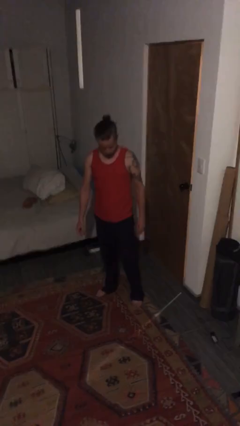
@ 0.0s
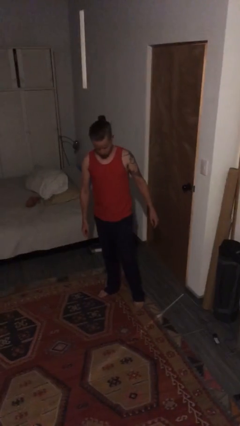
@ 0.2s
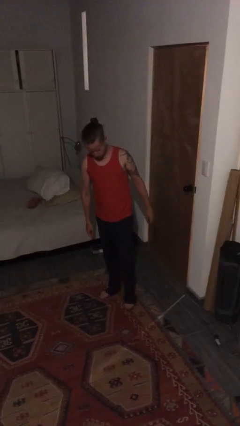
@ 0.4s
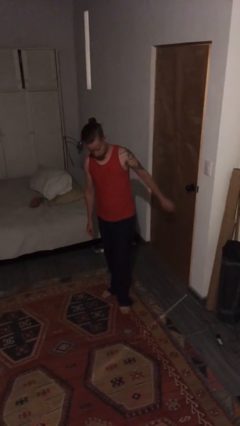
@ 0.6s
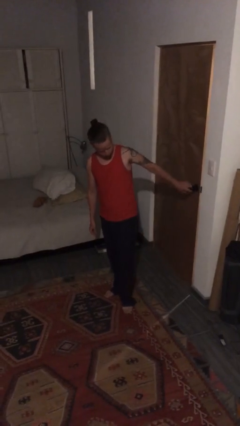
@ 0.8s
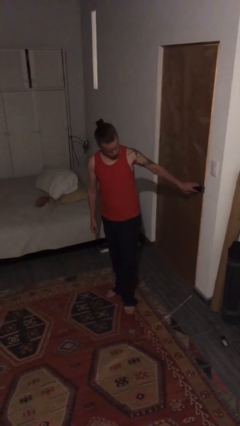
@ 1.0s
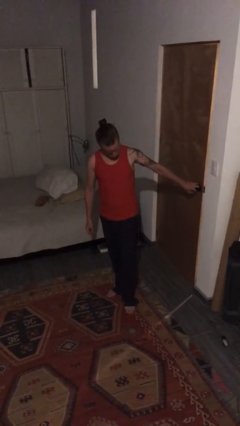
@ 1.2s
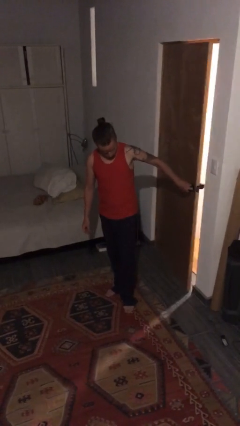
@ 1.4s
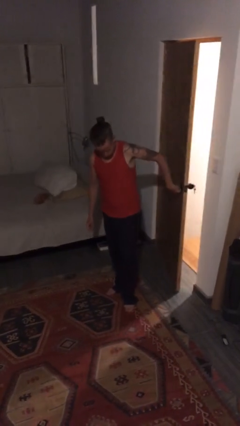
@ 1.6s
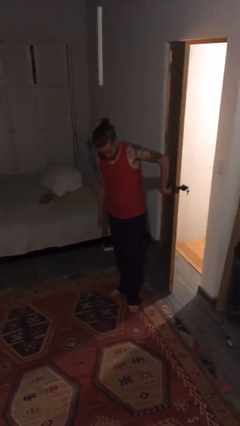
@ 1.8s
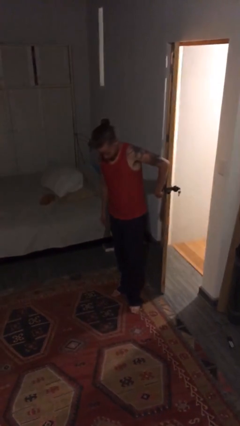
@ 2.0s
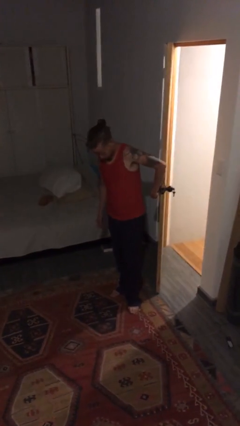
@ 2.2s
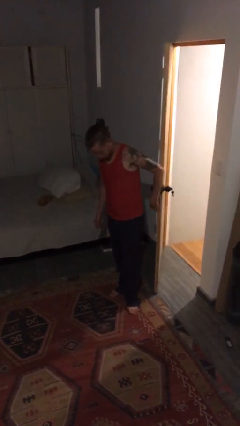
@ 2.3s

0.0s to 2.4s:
person opens facility door

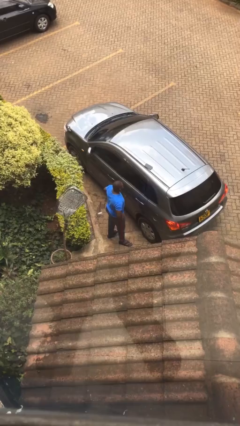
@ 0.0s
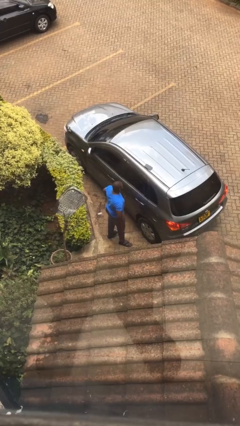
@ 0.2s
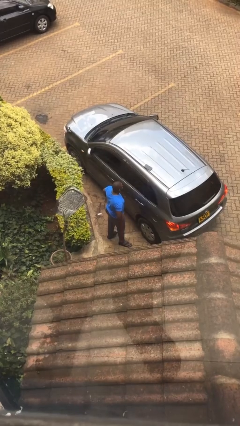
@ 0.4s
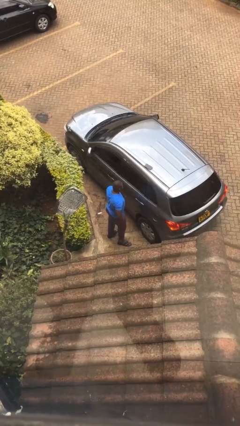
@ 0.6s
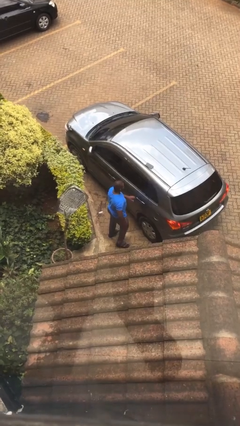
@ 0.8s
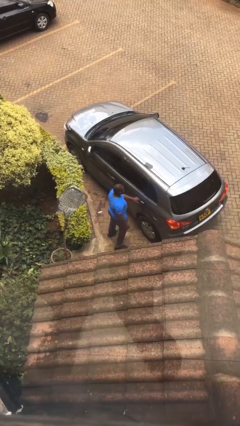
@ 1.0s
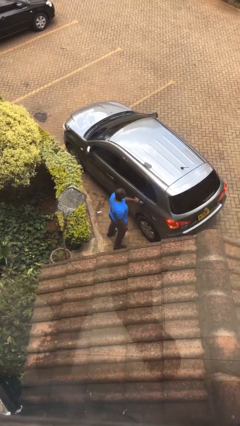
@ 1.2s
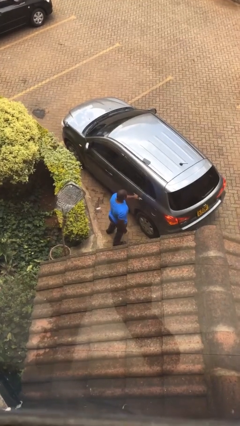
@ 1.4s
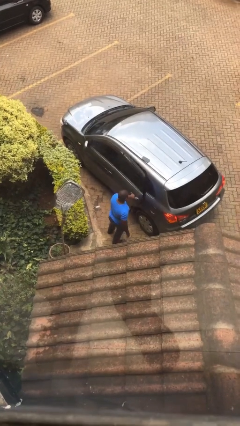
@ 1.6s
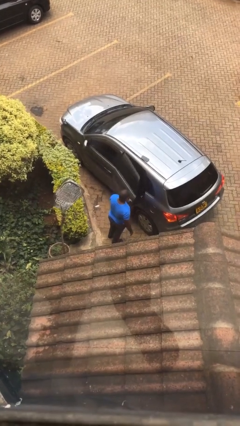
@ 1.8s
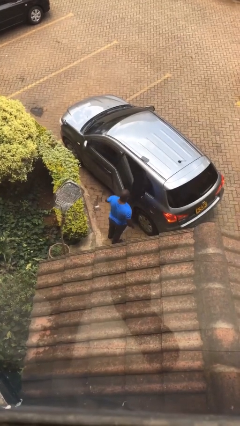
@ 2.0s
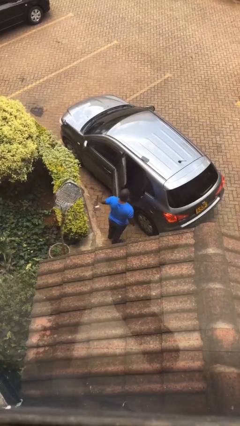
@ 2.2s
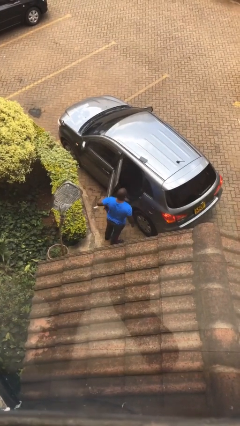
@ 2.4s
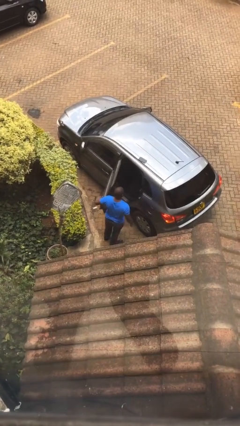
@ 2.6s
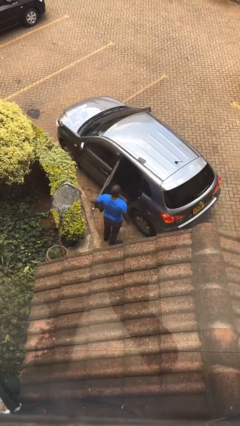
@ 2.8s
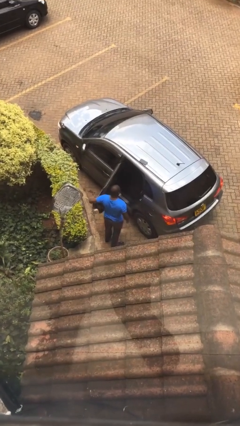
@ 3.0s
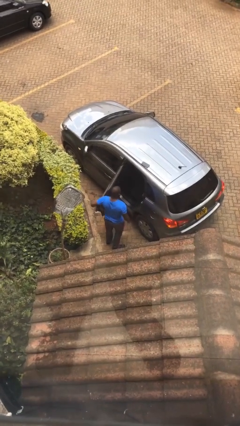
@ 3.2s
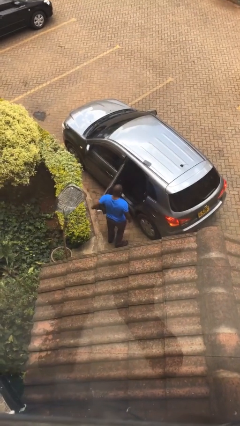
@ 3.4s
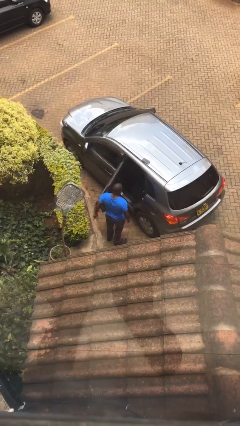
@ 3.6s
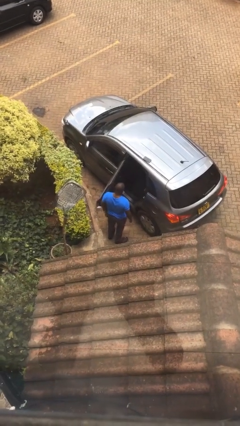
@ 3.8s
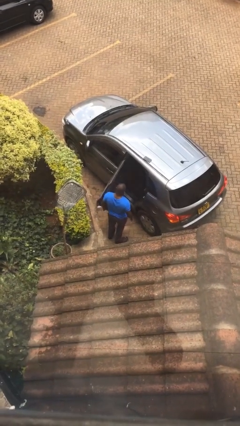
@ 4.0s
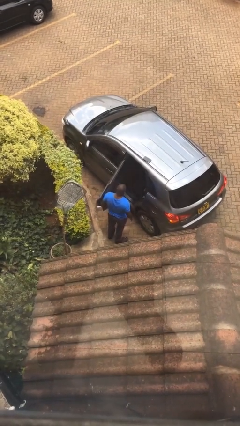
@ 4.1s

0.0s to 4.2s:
person opens car door

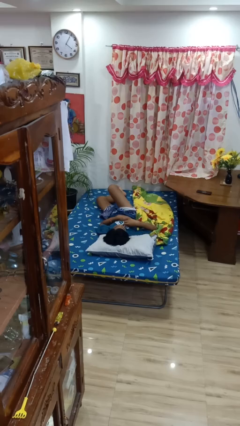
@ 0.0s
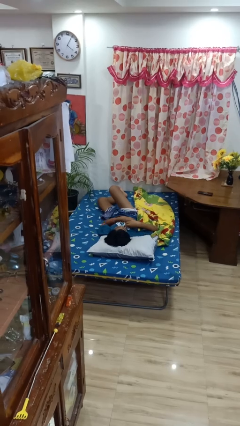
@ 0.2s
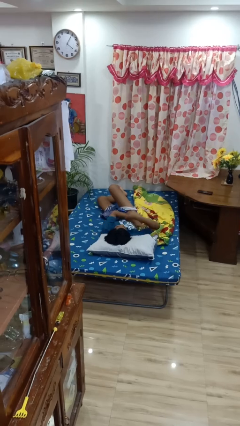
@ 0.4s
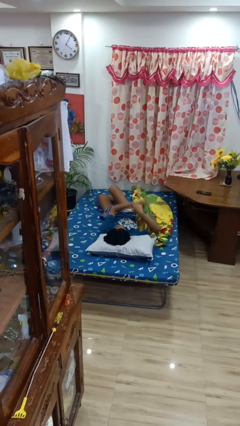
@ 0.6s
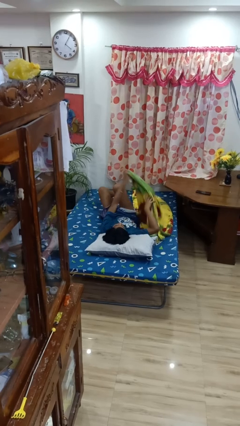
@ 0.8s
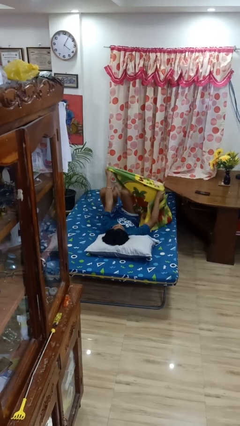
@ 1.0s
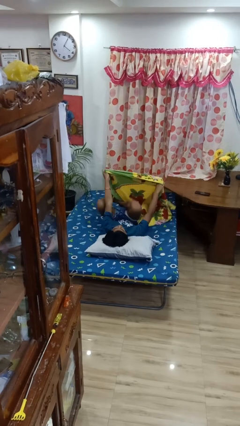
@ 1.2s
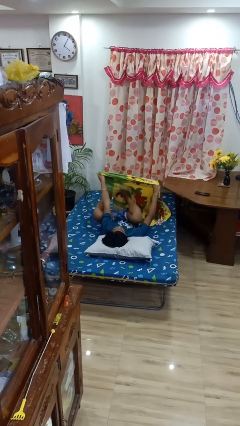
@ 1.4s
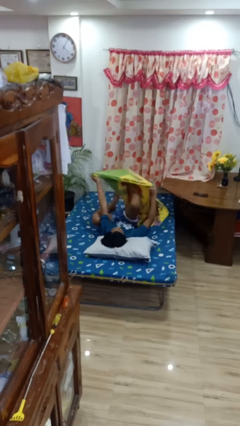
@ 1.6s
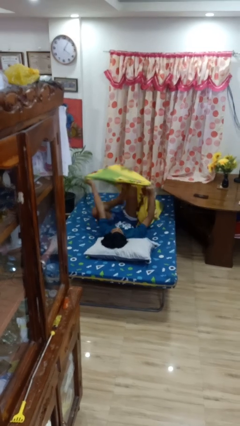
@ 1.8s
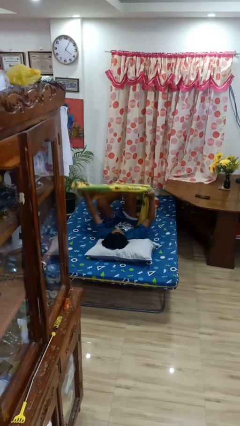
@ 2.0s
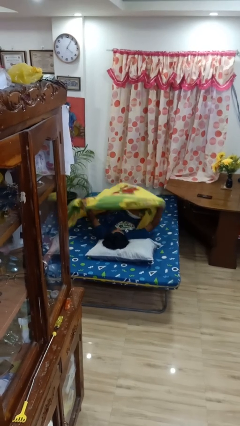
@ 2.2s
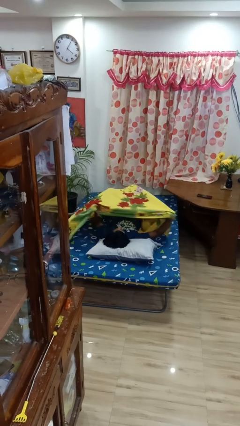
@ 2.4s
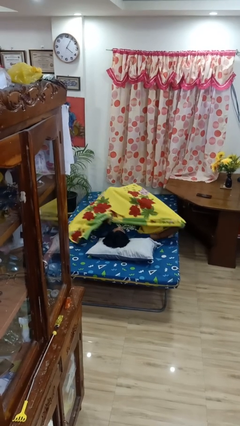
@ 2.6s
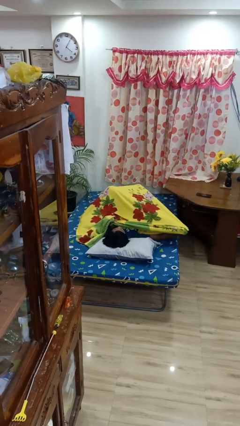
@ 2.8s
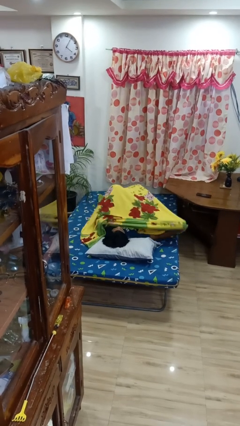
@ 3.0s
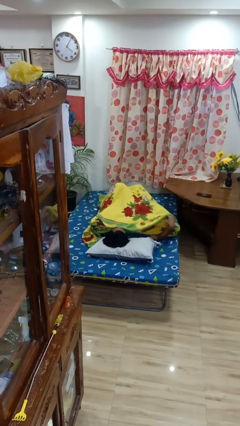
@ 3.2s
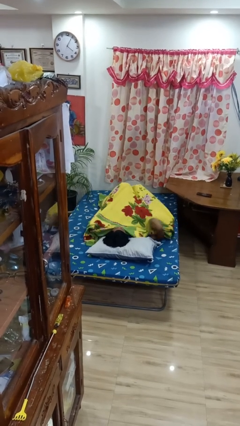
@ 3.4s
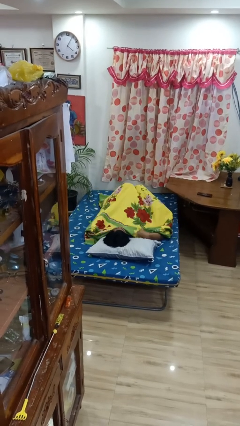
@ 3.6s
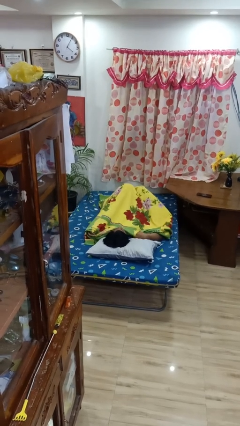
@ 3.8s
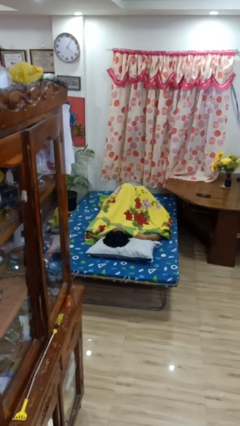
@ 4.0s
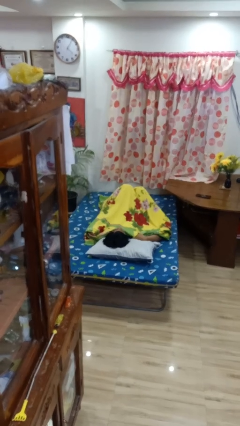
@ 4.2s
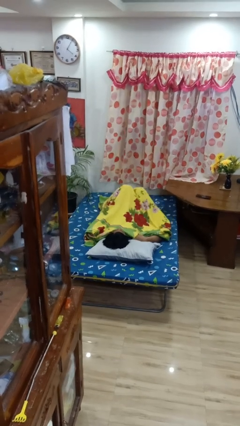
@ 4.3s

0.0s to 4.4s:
person covers with bedsheets

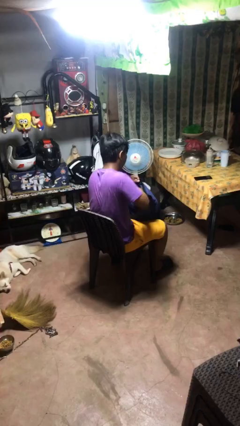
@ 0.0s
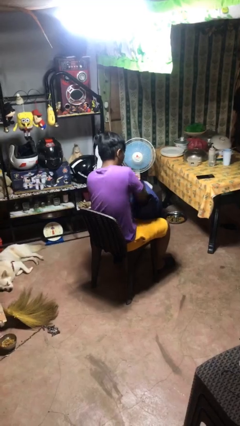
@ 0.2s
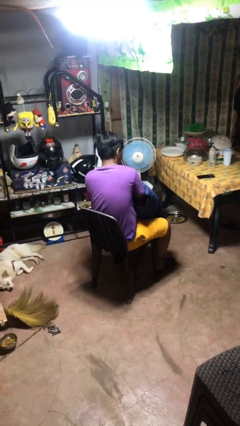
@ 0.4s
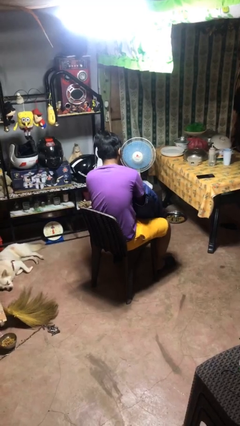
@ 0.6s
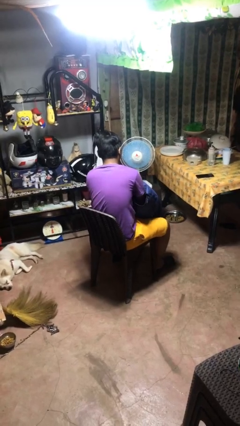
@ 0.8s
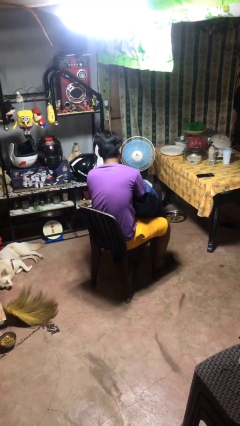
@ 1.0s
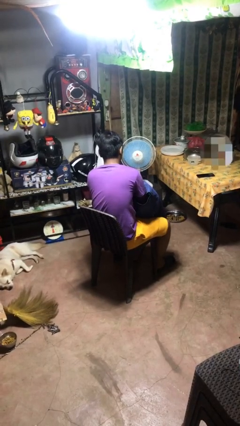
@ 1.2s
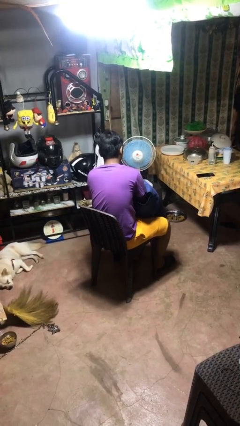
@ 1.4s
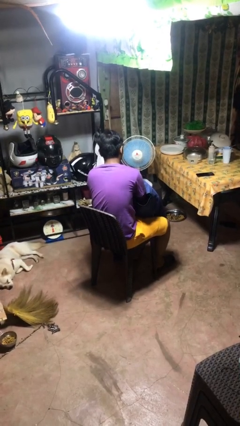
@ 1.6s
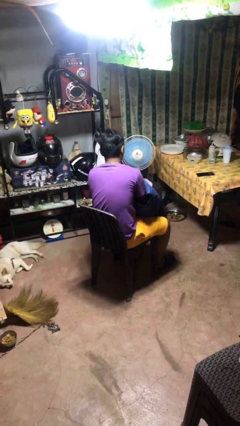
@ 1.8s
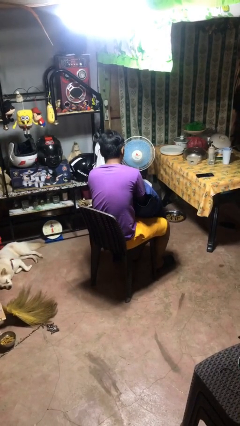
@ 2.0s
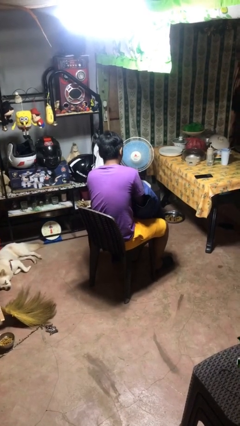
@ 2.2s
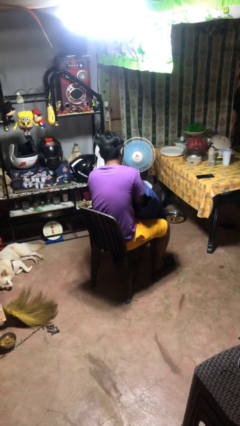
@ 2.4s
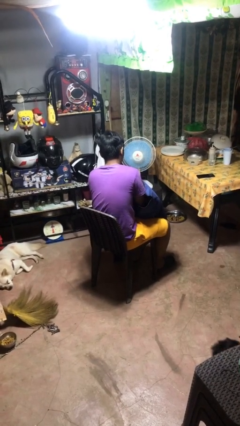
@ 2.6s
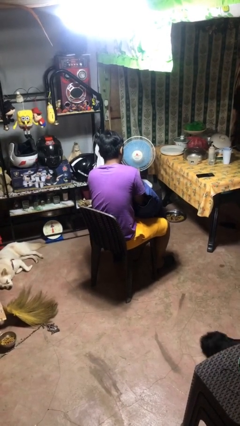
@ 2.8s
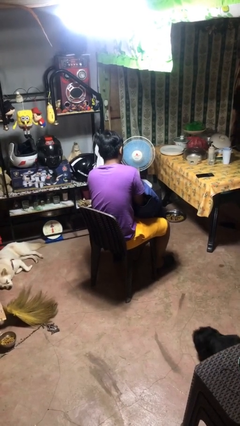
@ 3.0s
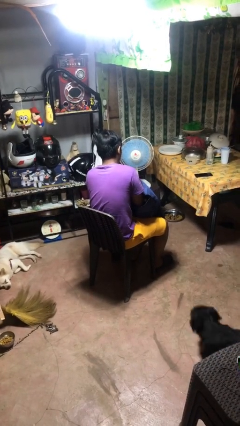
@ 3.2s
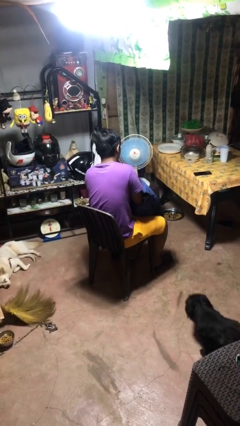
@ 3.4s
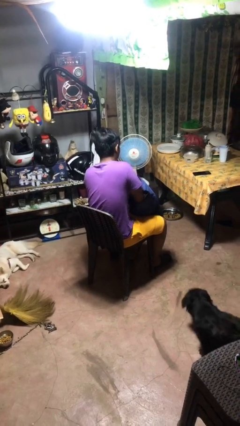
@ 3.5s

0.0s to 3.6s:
person searches in backpack

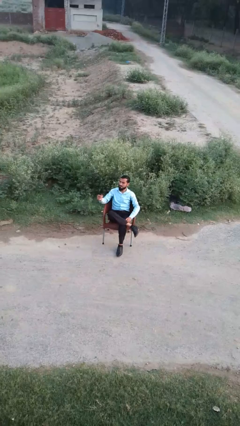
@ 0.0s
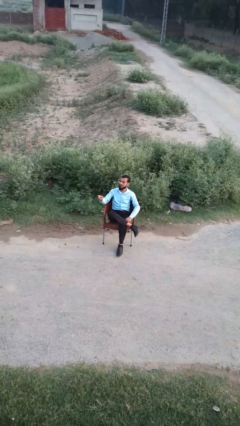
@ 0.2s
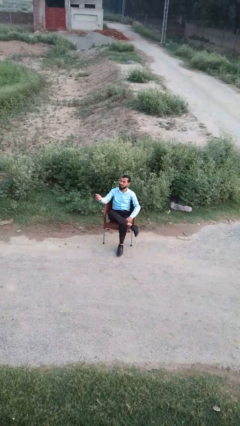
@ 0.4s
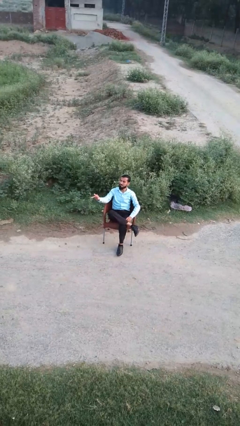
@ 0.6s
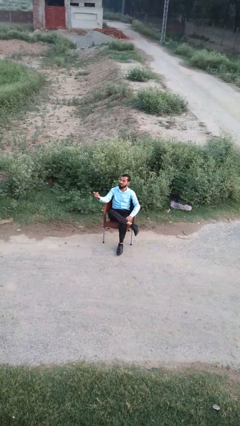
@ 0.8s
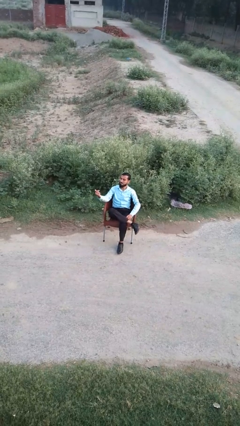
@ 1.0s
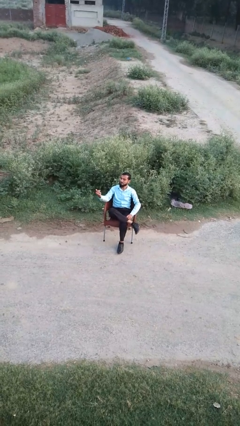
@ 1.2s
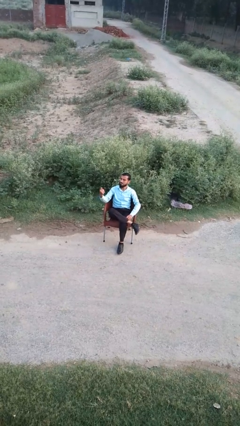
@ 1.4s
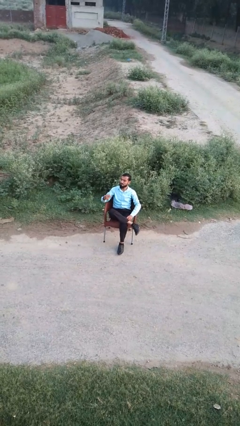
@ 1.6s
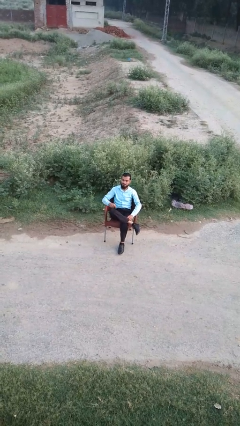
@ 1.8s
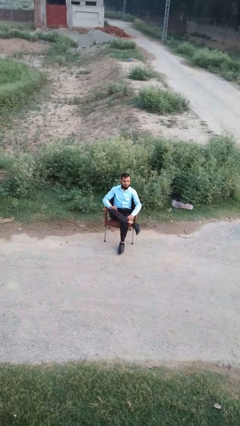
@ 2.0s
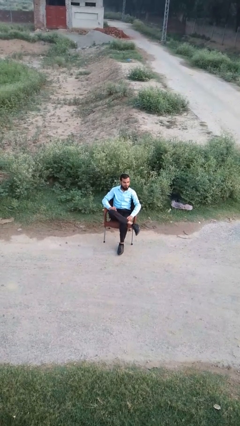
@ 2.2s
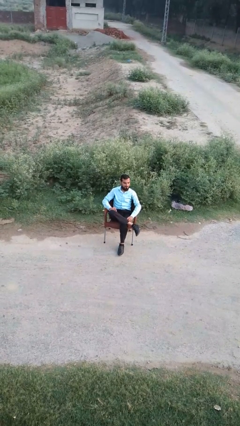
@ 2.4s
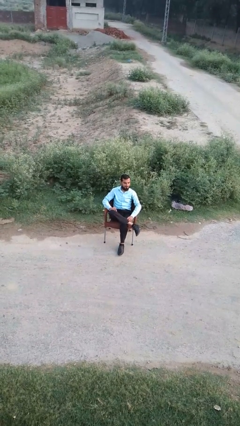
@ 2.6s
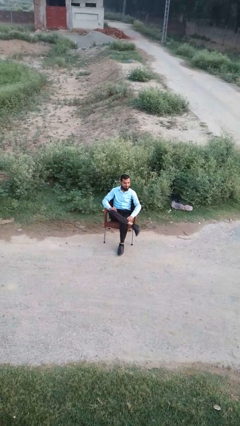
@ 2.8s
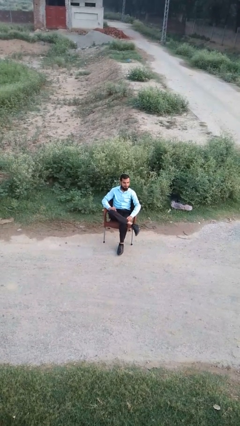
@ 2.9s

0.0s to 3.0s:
person gestures come here

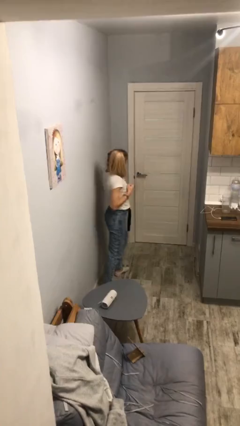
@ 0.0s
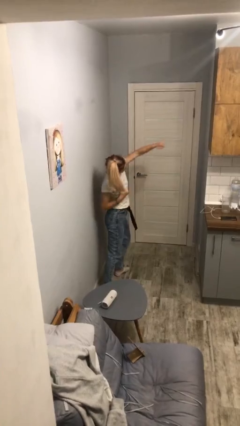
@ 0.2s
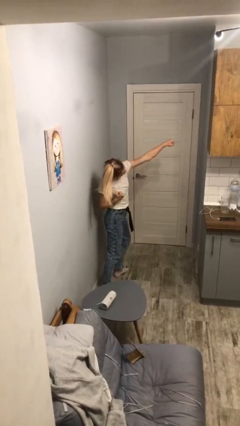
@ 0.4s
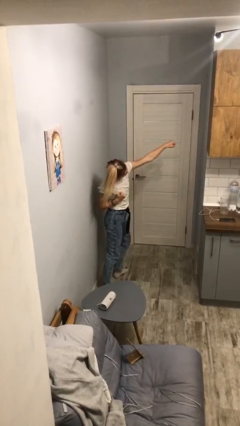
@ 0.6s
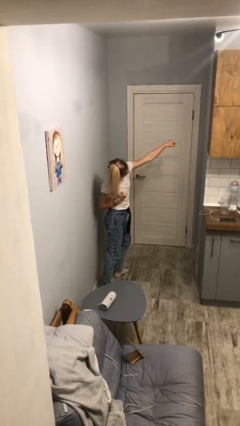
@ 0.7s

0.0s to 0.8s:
person karate chop
